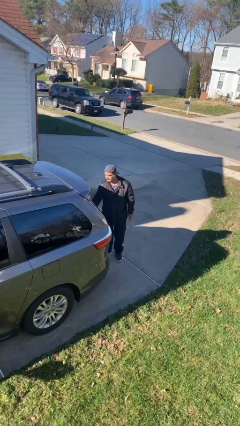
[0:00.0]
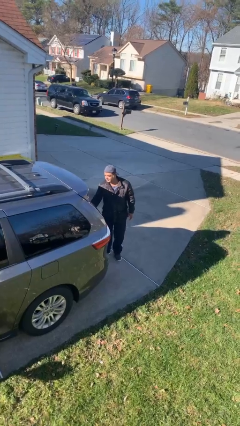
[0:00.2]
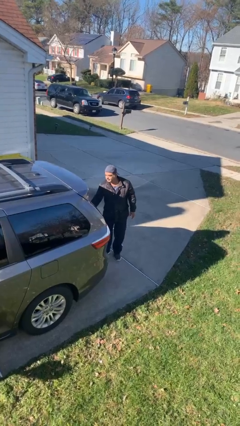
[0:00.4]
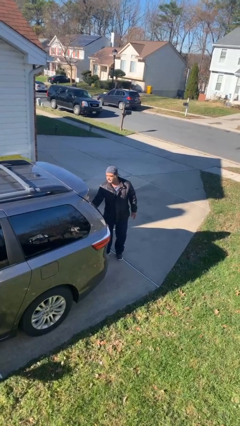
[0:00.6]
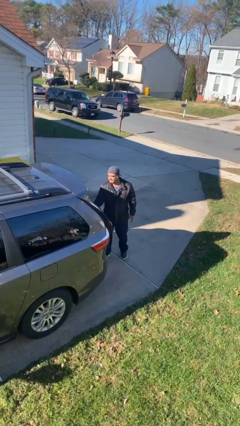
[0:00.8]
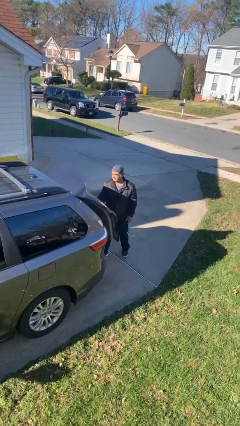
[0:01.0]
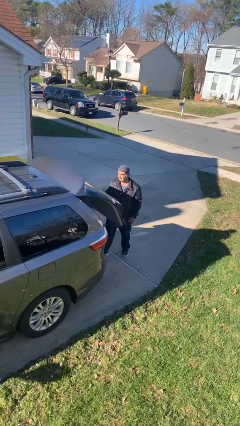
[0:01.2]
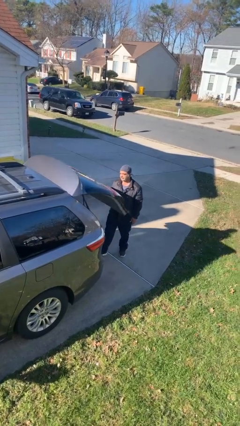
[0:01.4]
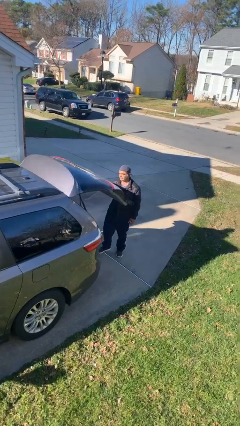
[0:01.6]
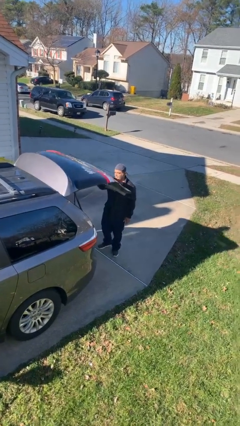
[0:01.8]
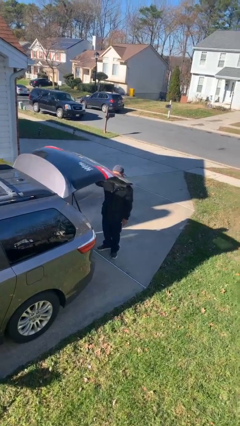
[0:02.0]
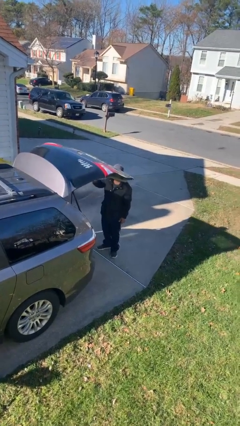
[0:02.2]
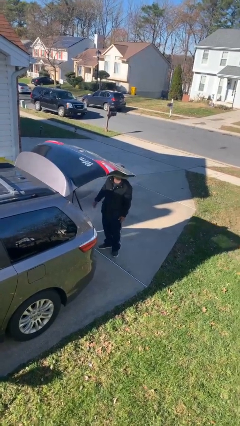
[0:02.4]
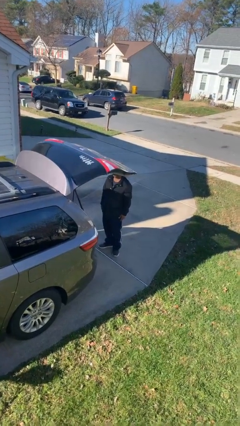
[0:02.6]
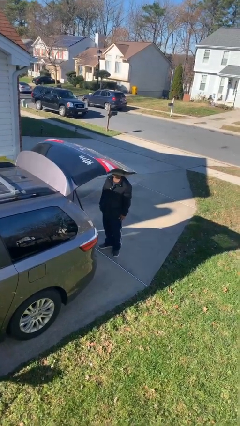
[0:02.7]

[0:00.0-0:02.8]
person opens car trunk

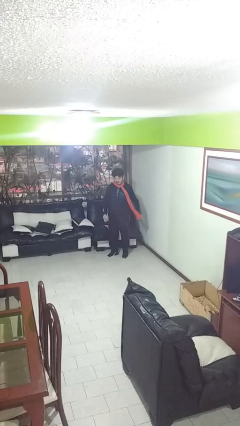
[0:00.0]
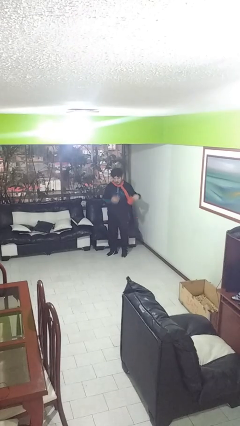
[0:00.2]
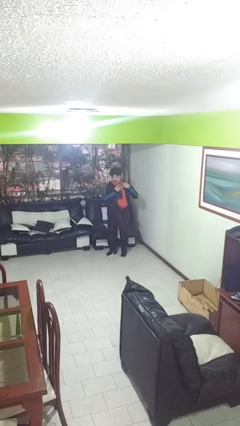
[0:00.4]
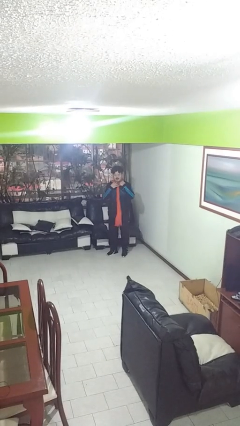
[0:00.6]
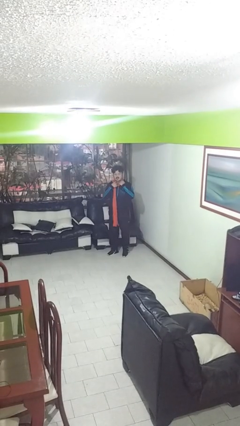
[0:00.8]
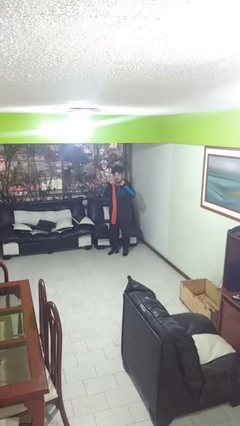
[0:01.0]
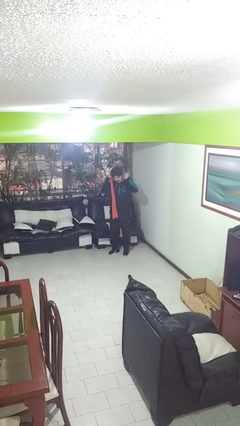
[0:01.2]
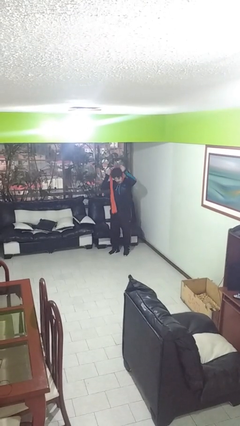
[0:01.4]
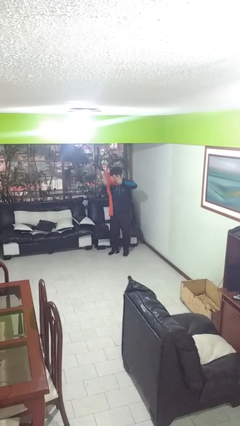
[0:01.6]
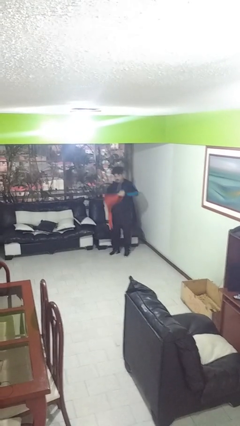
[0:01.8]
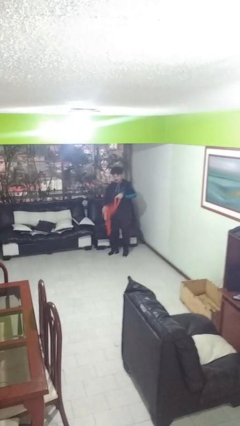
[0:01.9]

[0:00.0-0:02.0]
person takes off scarf

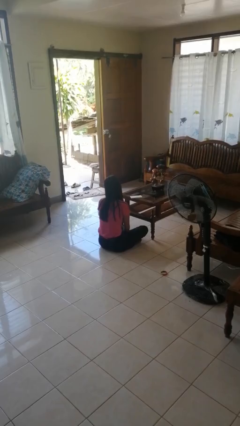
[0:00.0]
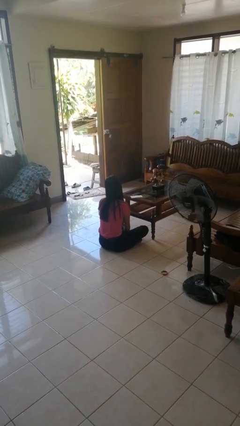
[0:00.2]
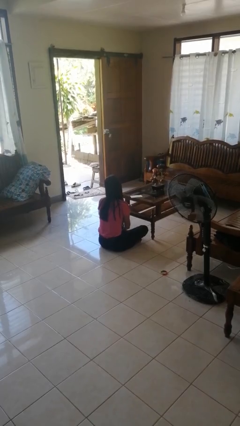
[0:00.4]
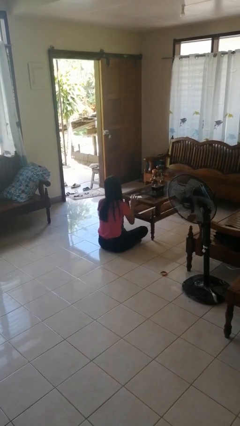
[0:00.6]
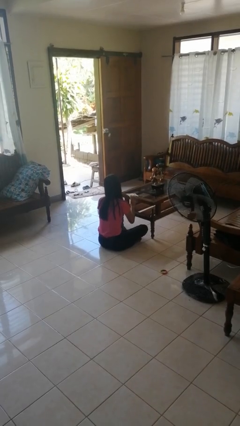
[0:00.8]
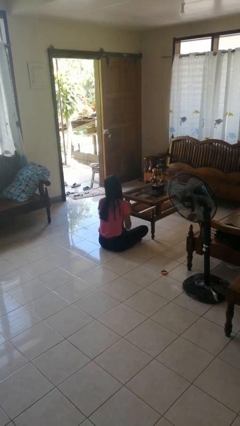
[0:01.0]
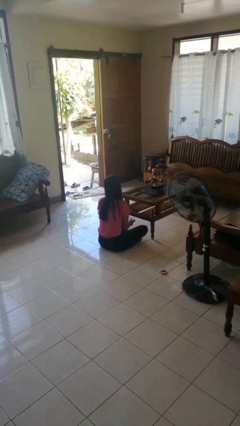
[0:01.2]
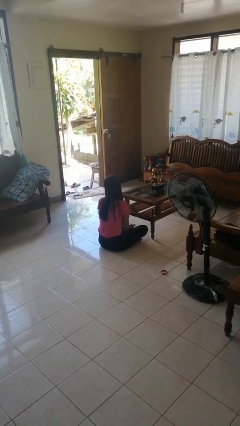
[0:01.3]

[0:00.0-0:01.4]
person picks up object from table

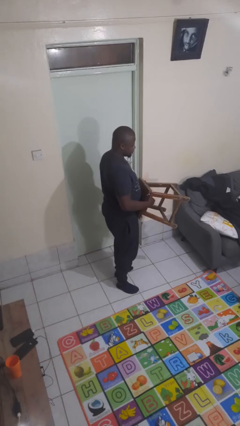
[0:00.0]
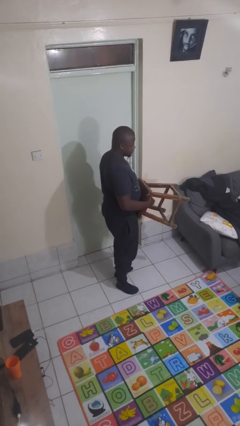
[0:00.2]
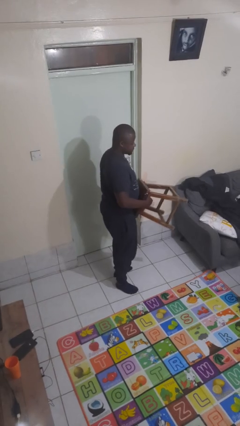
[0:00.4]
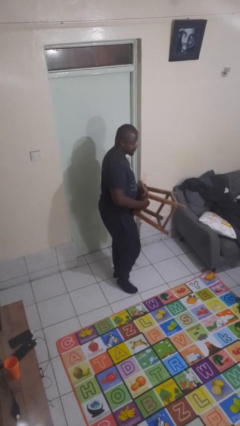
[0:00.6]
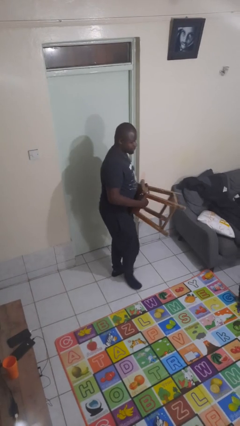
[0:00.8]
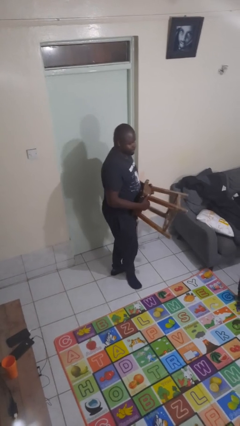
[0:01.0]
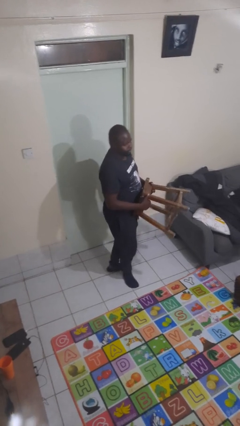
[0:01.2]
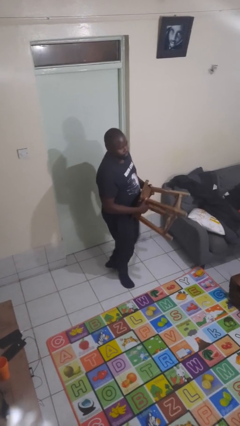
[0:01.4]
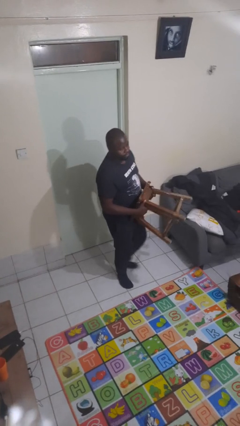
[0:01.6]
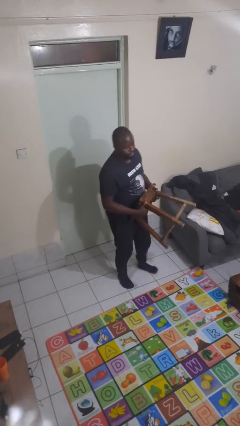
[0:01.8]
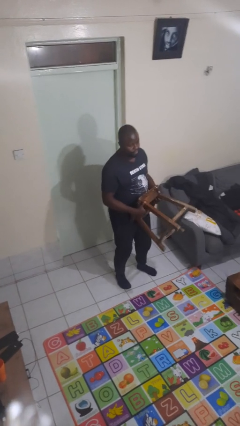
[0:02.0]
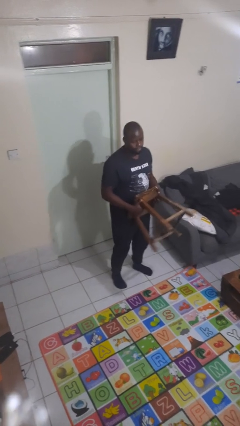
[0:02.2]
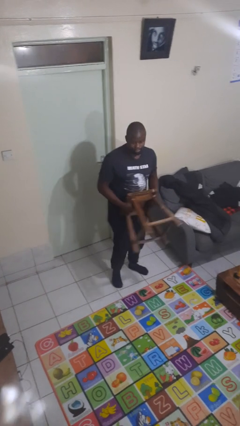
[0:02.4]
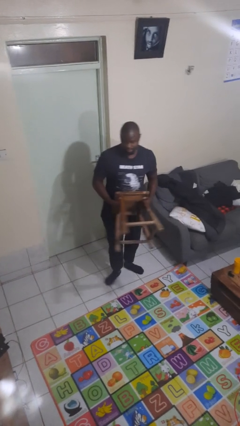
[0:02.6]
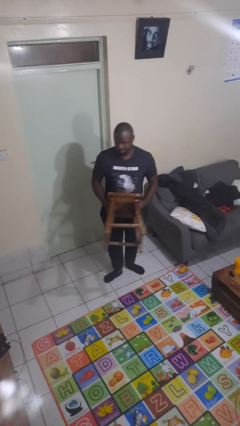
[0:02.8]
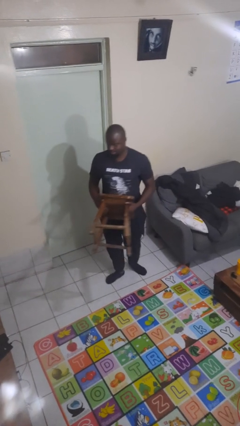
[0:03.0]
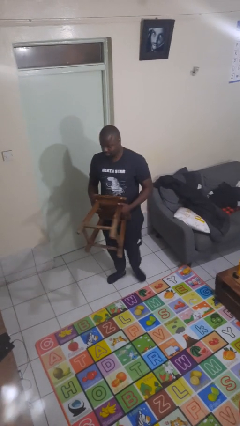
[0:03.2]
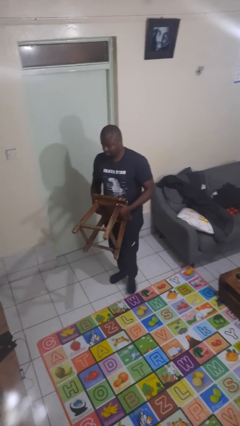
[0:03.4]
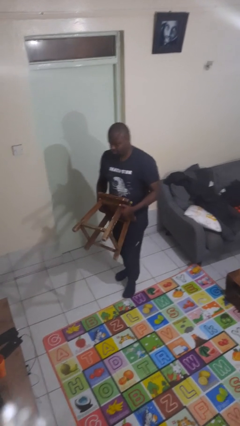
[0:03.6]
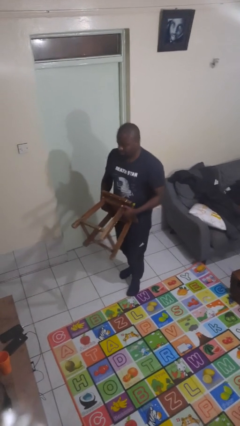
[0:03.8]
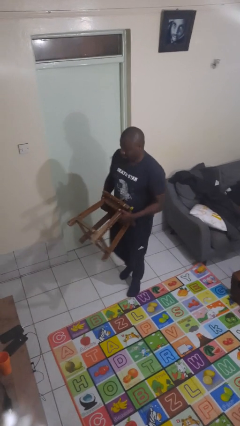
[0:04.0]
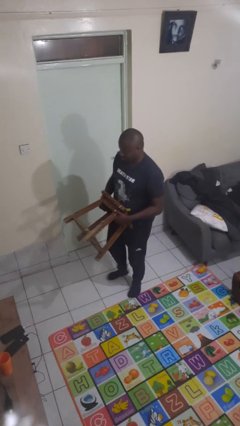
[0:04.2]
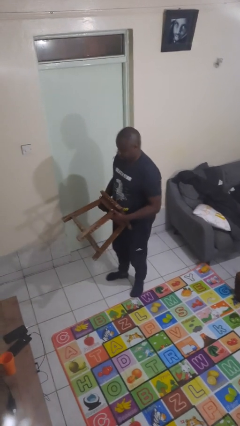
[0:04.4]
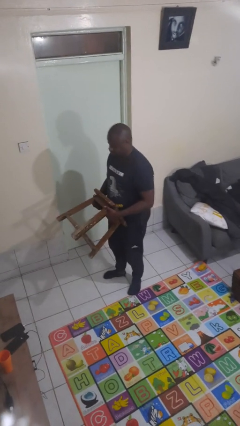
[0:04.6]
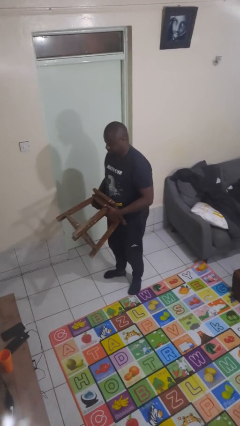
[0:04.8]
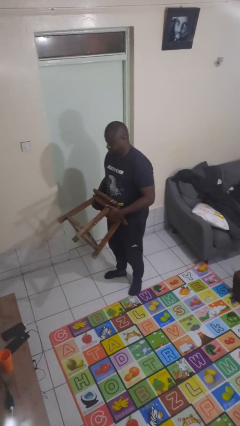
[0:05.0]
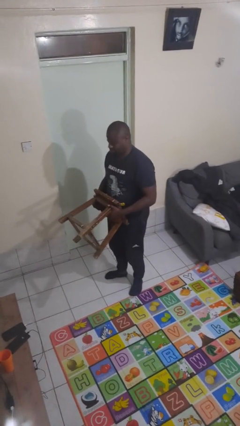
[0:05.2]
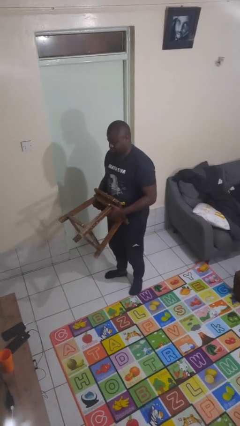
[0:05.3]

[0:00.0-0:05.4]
person carries furniture

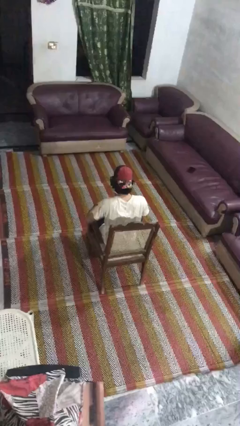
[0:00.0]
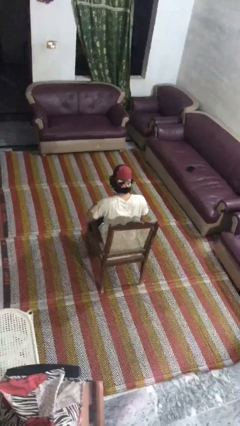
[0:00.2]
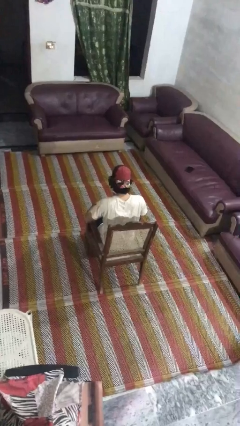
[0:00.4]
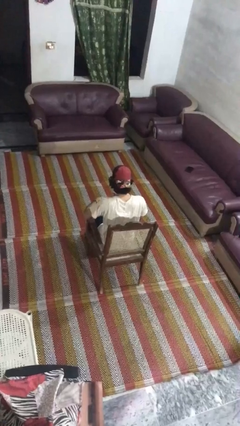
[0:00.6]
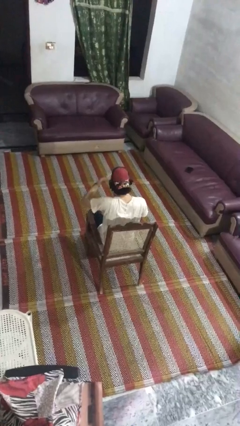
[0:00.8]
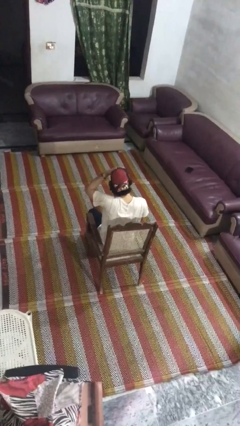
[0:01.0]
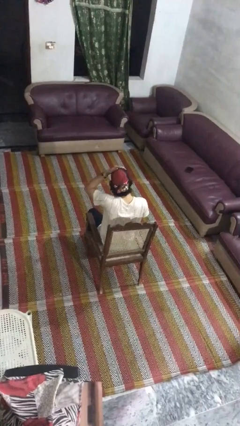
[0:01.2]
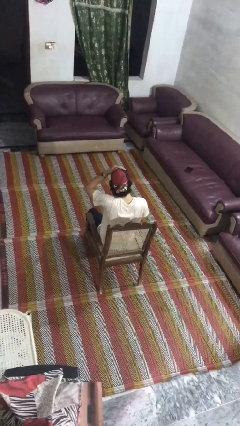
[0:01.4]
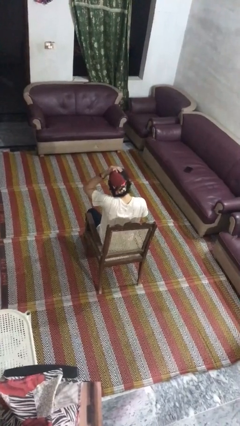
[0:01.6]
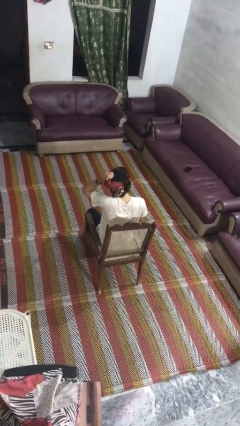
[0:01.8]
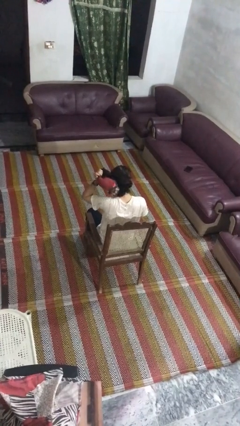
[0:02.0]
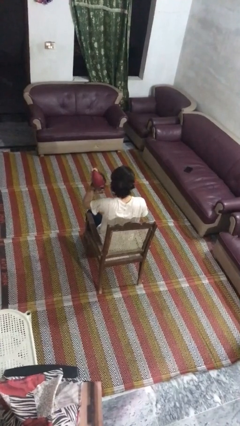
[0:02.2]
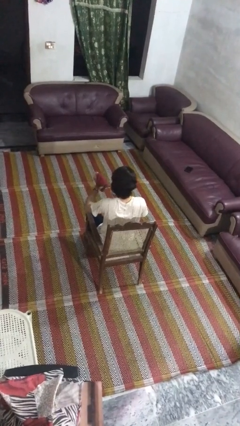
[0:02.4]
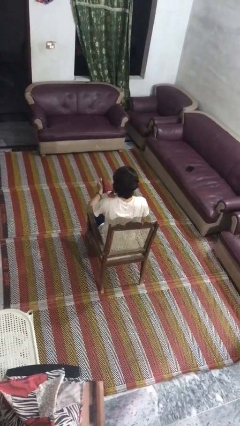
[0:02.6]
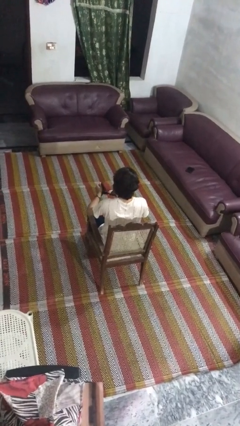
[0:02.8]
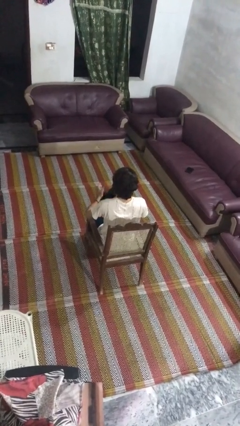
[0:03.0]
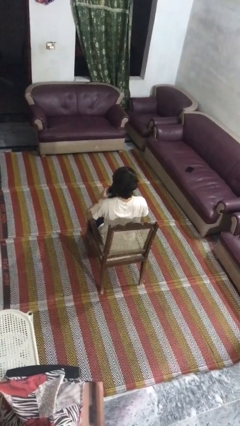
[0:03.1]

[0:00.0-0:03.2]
person takes off hat

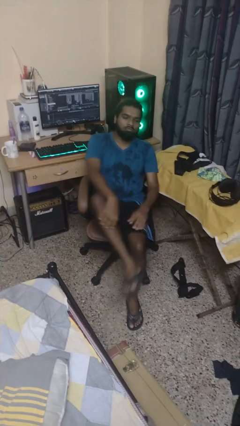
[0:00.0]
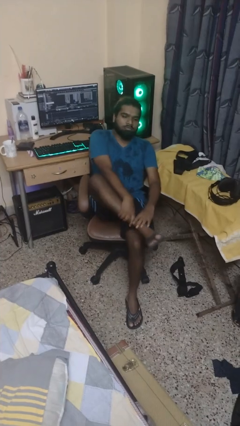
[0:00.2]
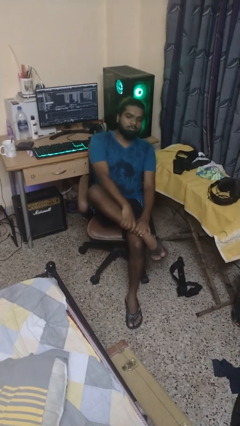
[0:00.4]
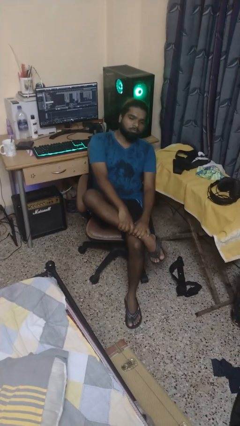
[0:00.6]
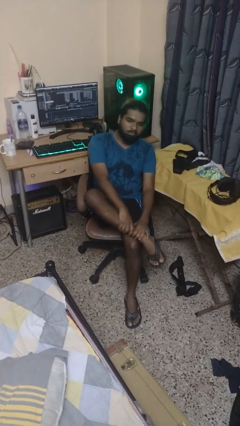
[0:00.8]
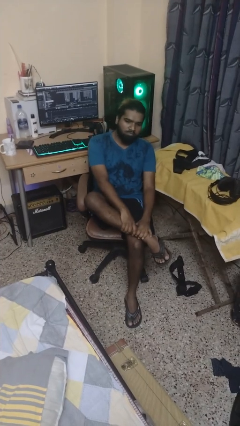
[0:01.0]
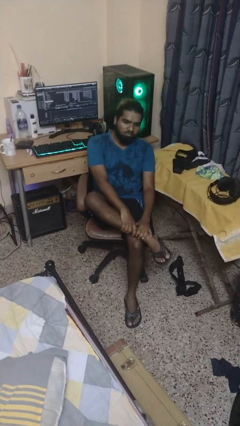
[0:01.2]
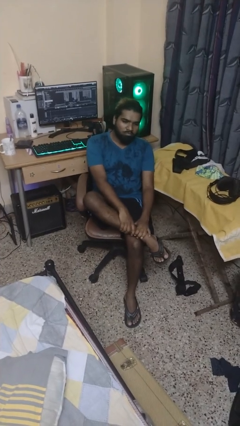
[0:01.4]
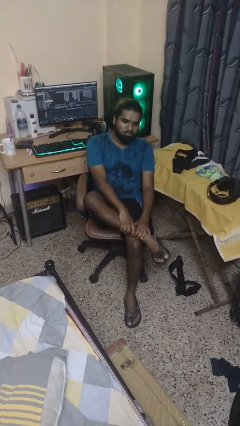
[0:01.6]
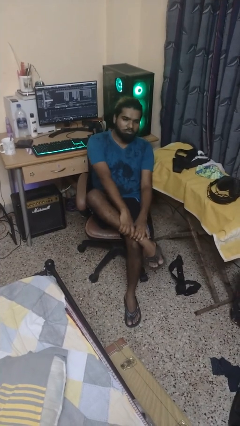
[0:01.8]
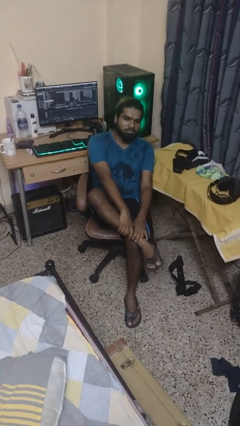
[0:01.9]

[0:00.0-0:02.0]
person crosses legs

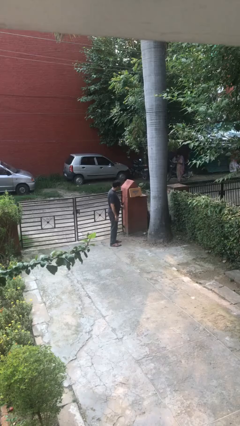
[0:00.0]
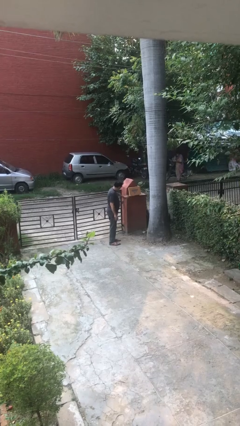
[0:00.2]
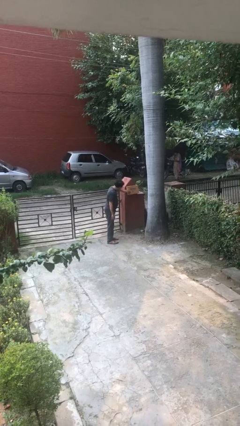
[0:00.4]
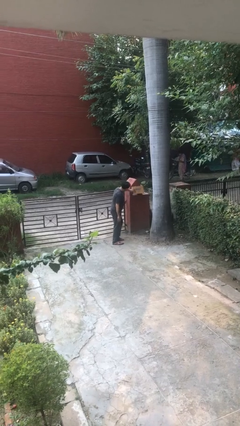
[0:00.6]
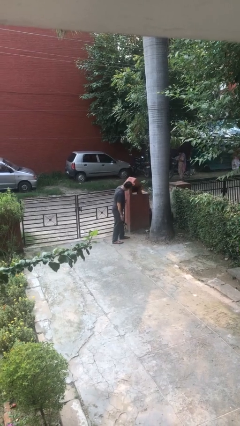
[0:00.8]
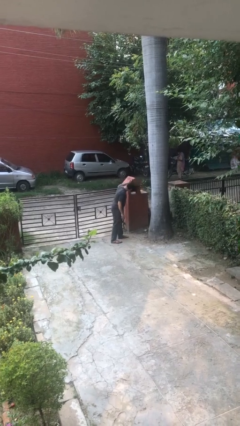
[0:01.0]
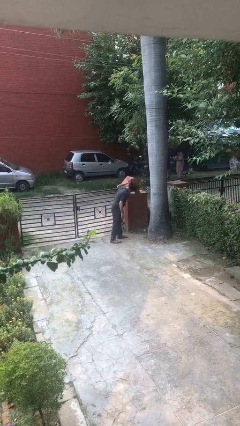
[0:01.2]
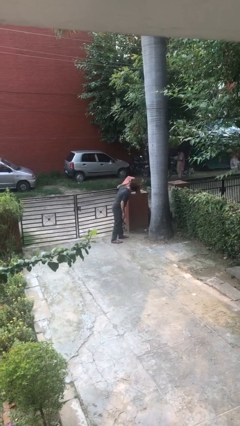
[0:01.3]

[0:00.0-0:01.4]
person opens mailbox
